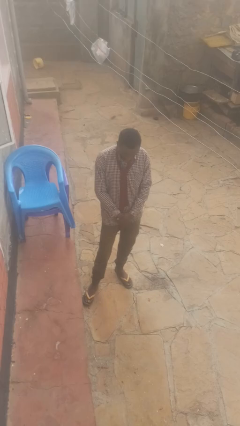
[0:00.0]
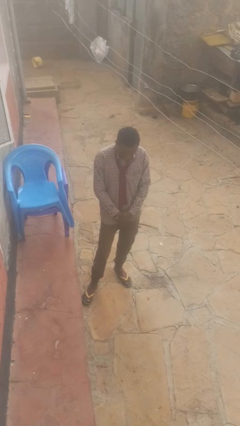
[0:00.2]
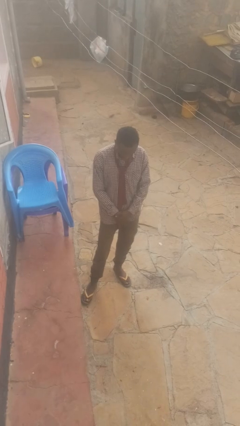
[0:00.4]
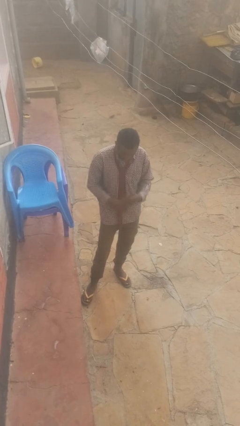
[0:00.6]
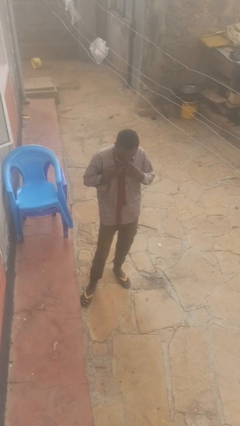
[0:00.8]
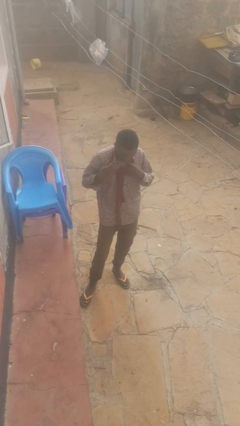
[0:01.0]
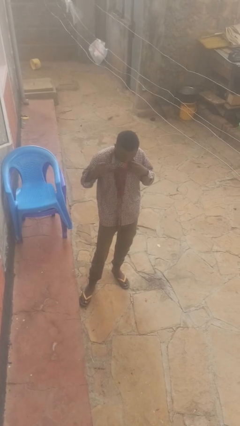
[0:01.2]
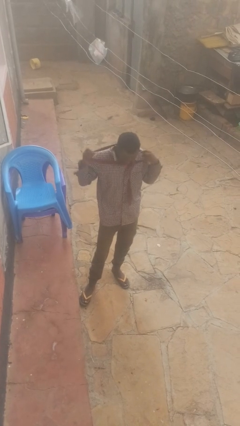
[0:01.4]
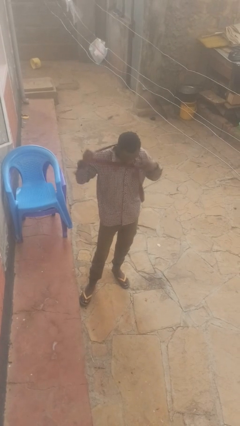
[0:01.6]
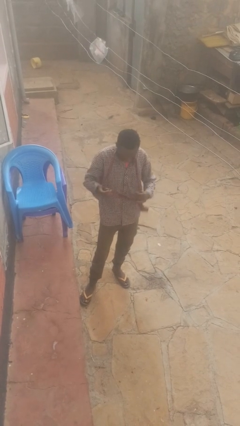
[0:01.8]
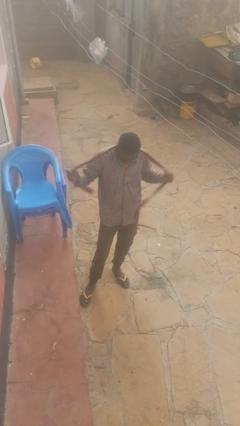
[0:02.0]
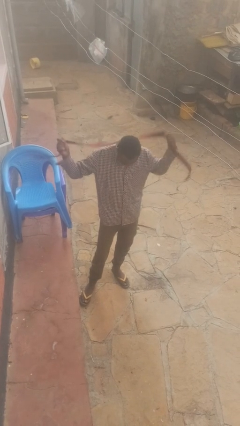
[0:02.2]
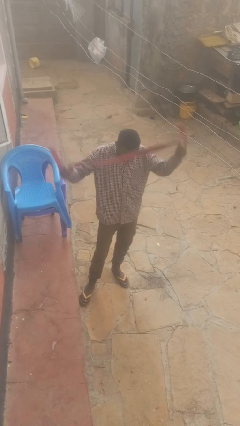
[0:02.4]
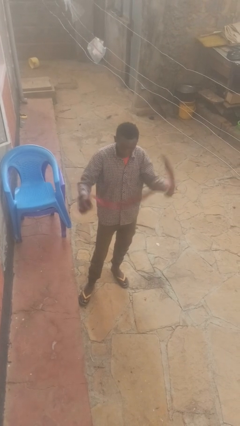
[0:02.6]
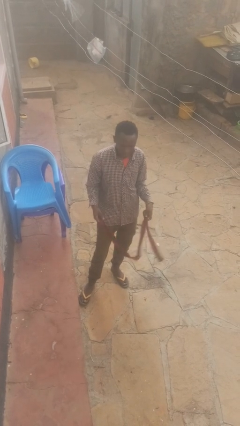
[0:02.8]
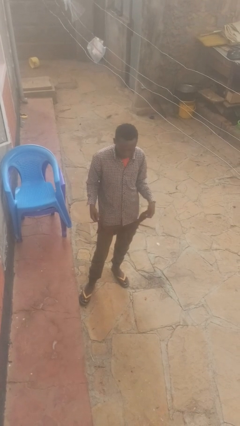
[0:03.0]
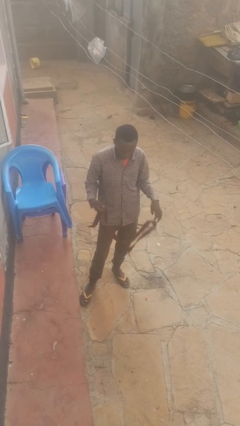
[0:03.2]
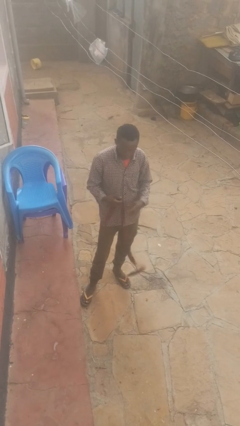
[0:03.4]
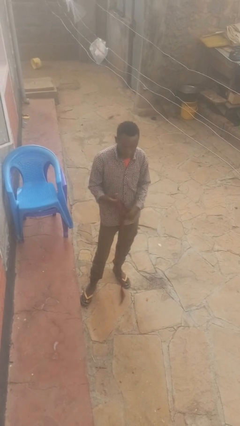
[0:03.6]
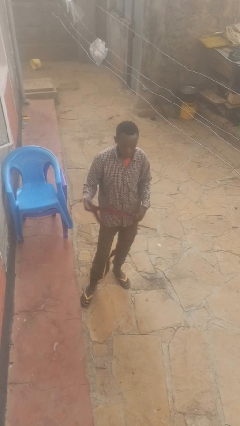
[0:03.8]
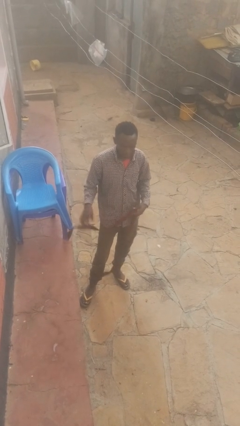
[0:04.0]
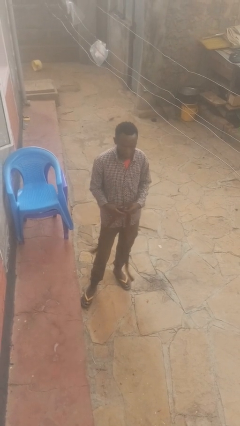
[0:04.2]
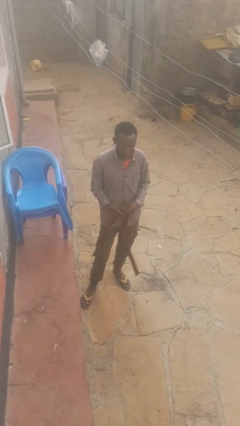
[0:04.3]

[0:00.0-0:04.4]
person takes off necktie

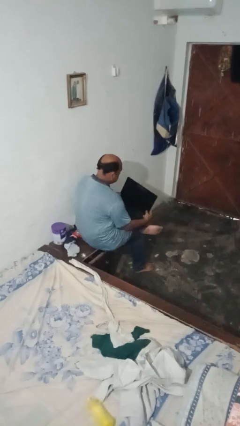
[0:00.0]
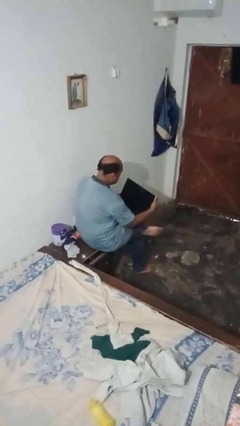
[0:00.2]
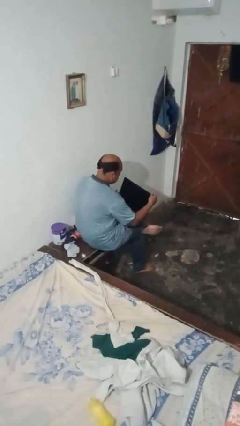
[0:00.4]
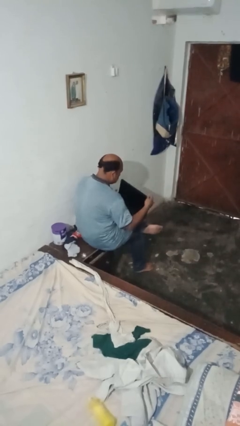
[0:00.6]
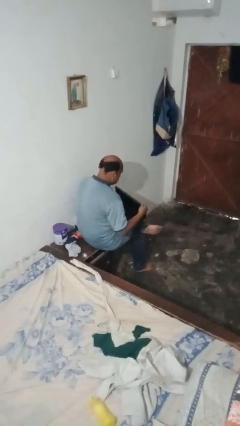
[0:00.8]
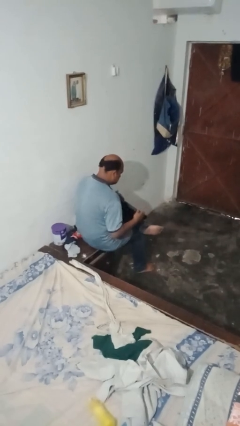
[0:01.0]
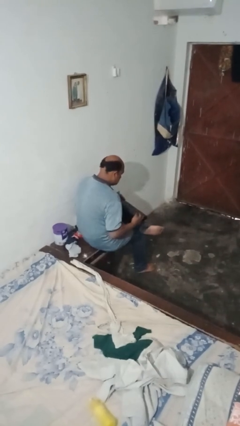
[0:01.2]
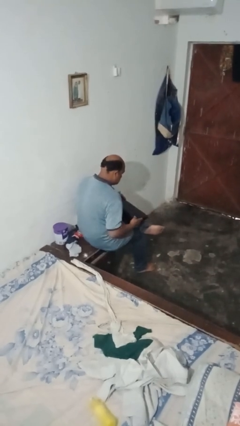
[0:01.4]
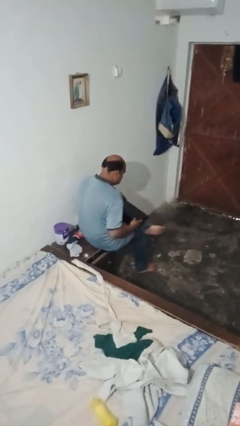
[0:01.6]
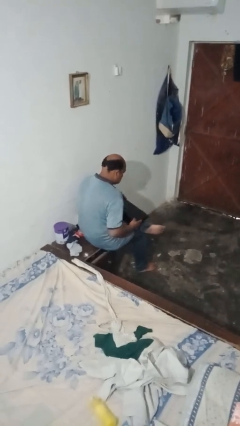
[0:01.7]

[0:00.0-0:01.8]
person closes laptop

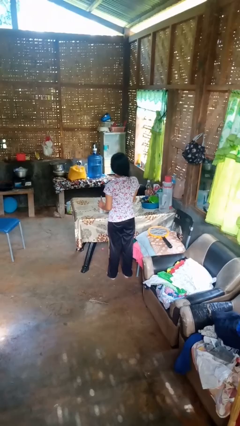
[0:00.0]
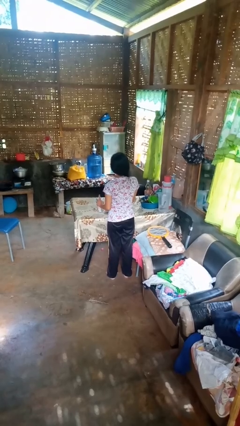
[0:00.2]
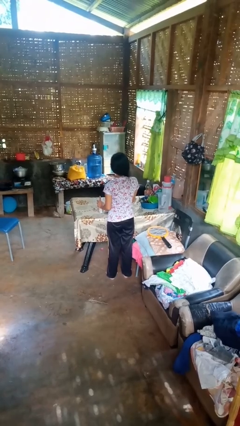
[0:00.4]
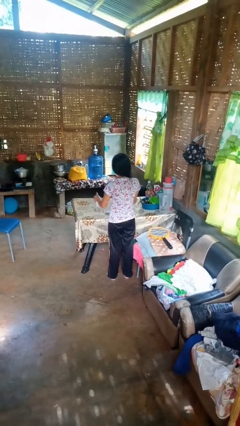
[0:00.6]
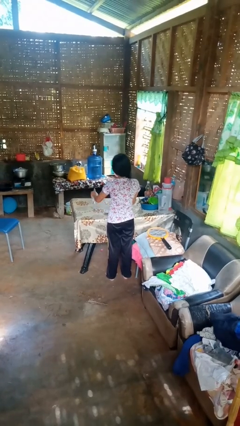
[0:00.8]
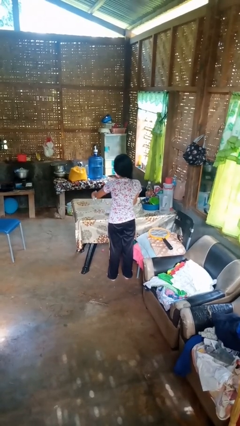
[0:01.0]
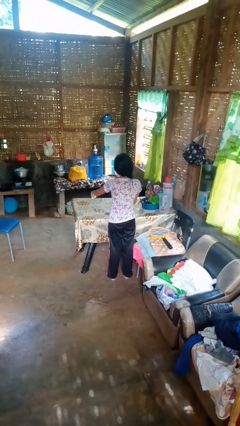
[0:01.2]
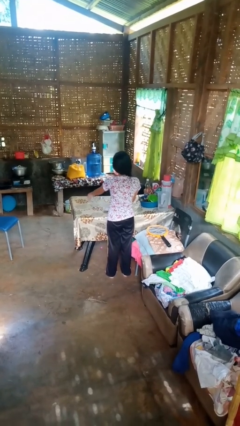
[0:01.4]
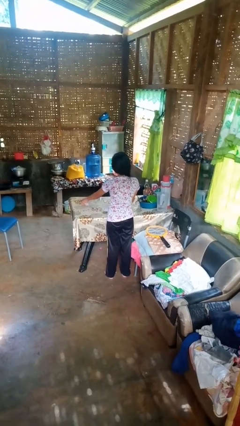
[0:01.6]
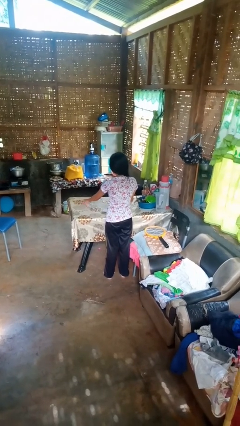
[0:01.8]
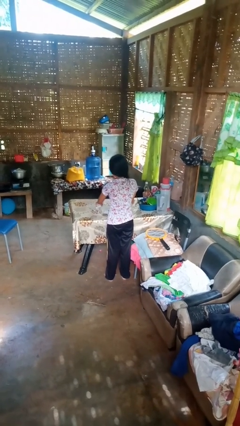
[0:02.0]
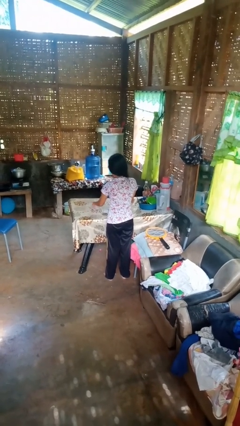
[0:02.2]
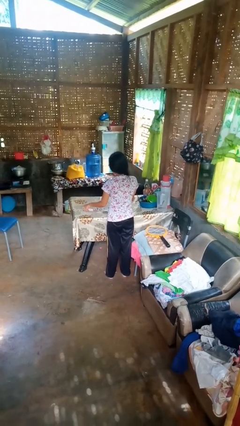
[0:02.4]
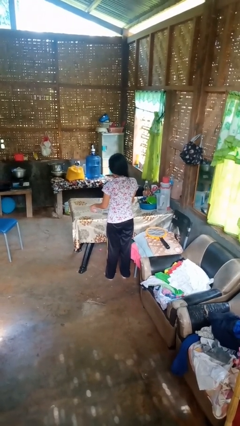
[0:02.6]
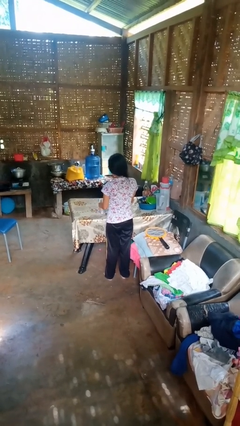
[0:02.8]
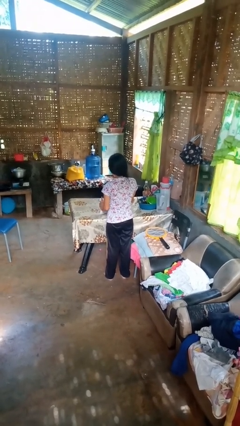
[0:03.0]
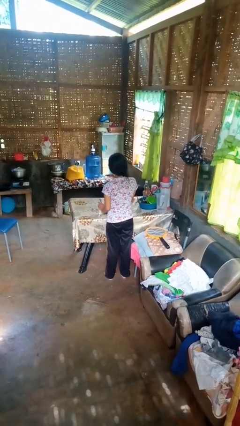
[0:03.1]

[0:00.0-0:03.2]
person sprays from bottle

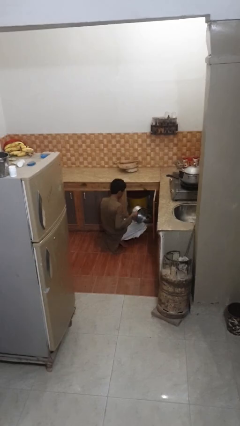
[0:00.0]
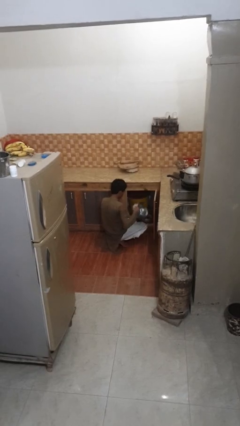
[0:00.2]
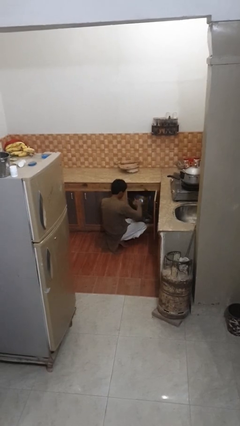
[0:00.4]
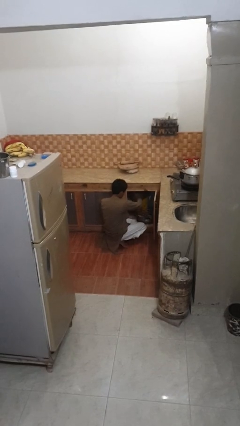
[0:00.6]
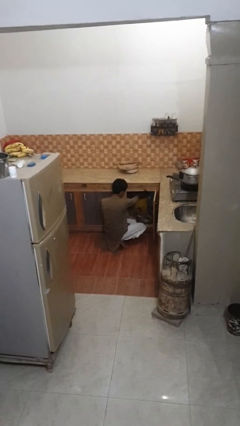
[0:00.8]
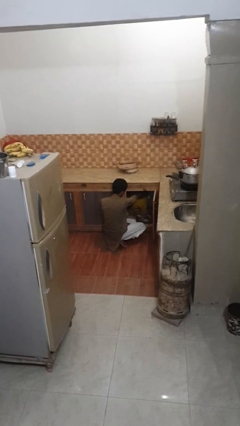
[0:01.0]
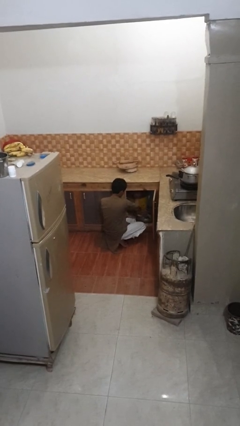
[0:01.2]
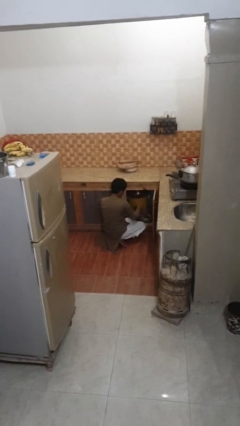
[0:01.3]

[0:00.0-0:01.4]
person puts object into kitchen drawer

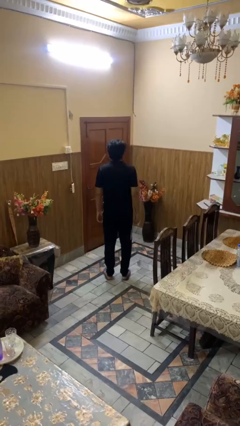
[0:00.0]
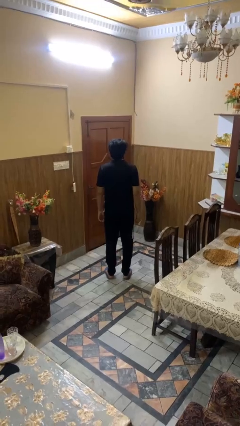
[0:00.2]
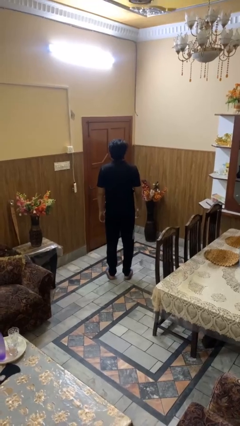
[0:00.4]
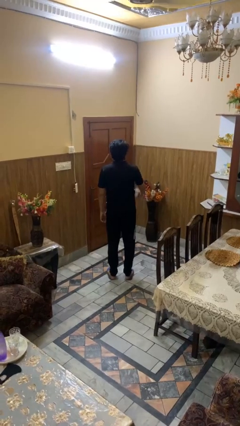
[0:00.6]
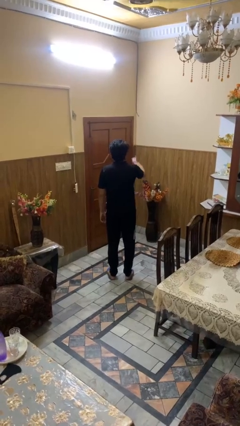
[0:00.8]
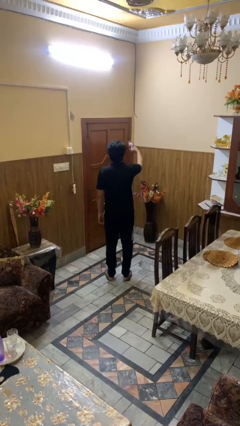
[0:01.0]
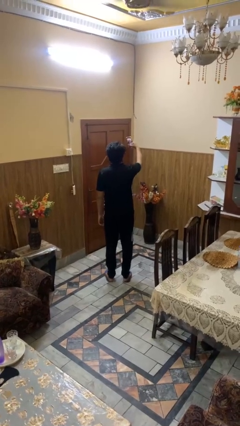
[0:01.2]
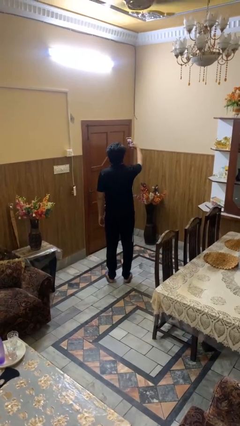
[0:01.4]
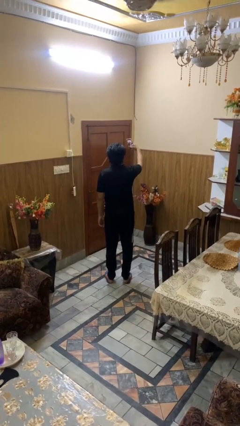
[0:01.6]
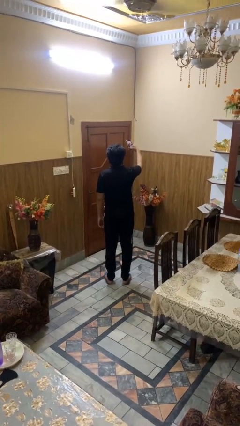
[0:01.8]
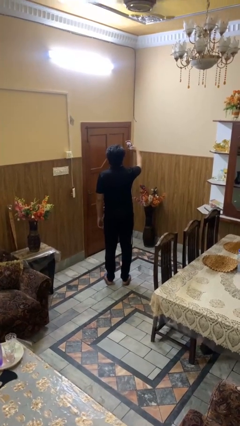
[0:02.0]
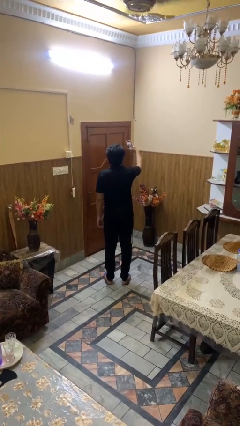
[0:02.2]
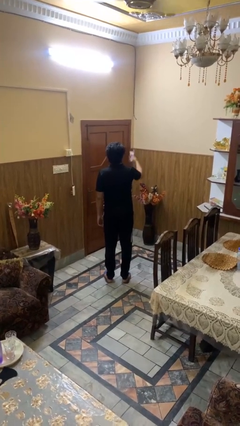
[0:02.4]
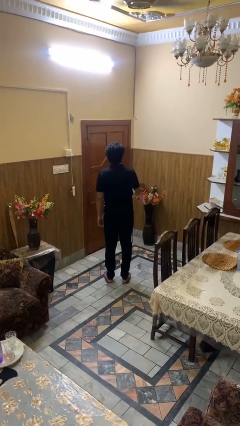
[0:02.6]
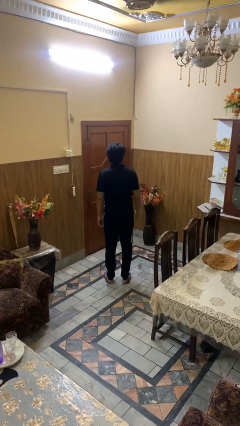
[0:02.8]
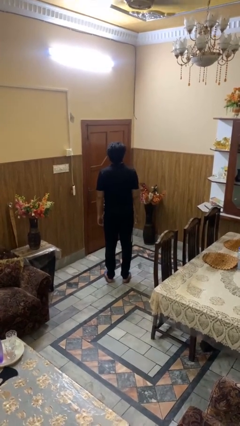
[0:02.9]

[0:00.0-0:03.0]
person takes selfie

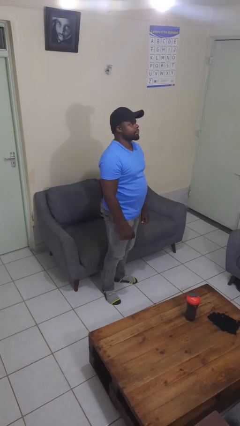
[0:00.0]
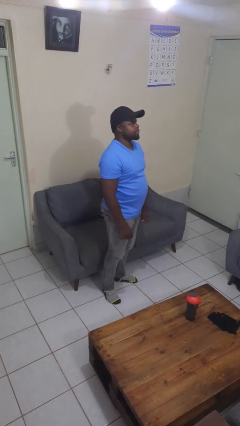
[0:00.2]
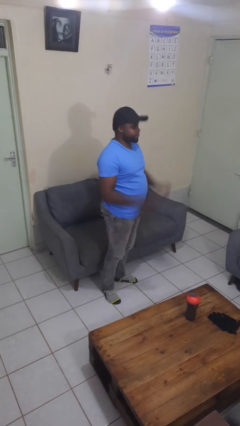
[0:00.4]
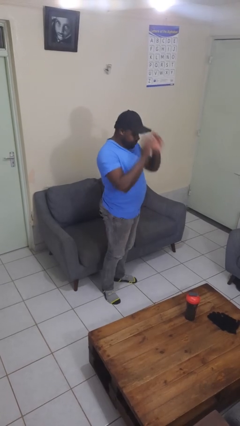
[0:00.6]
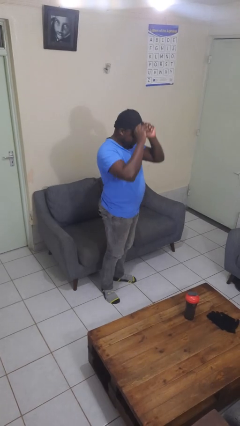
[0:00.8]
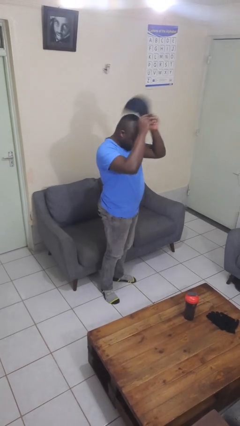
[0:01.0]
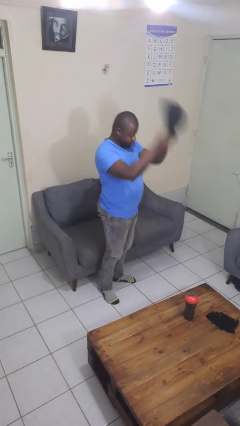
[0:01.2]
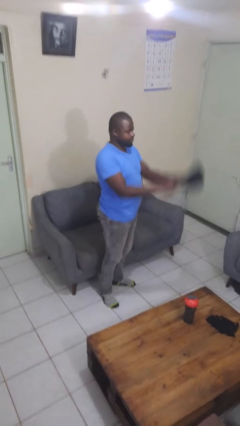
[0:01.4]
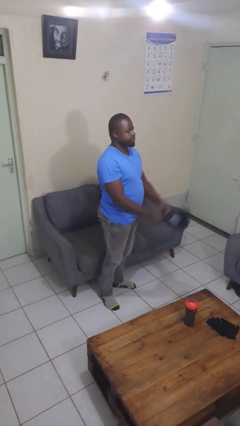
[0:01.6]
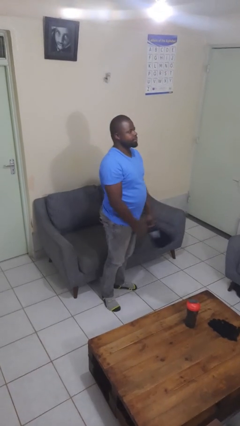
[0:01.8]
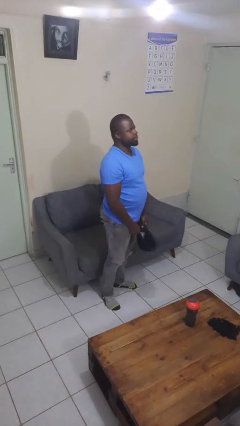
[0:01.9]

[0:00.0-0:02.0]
person takes off hat

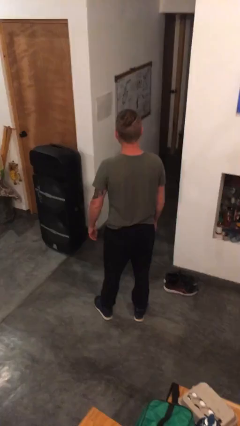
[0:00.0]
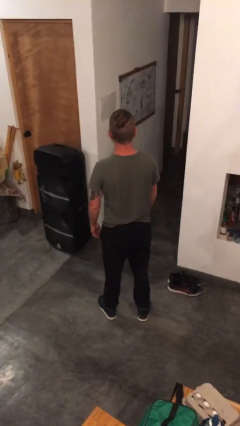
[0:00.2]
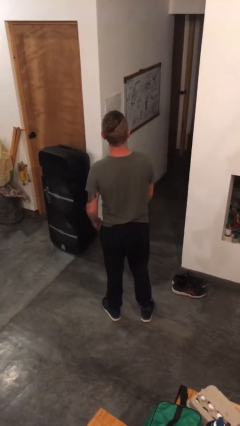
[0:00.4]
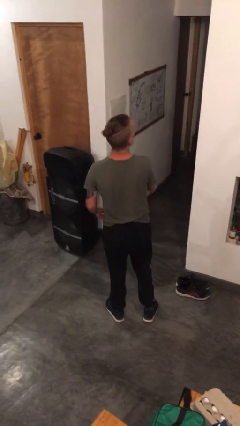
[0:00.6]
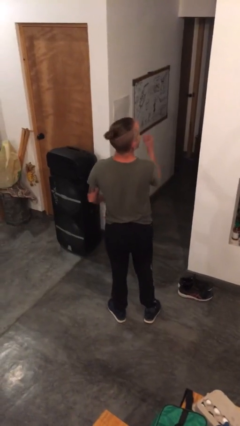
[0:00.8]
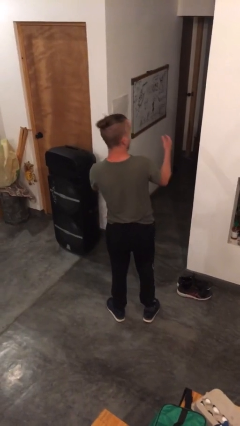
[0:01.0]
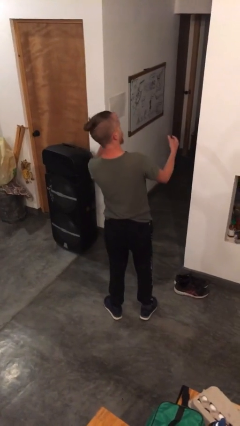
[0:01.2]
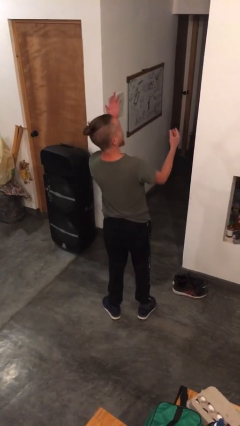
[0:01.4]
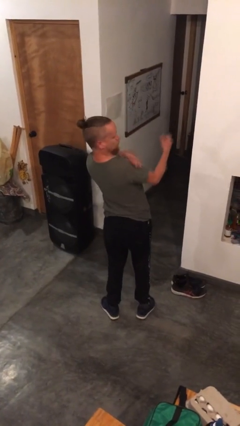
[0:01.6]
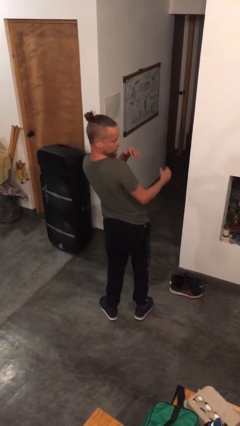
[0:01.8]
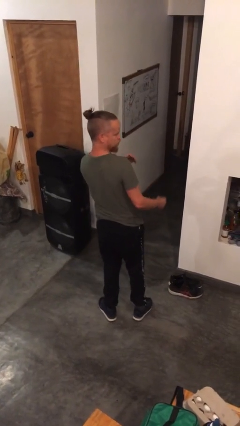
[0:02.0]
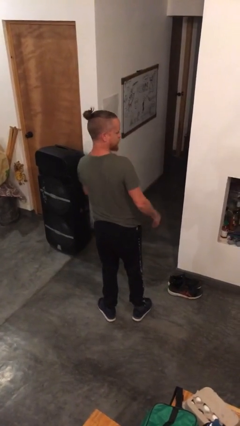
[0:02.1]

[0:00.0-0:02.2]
person swats bug
